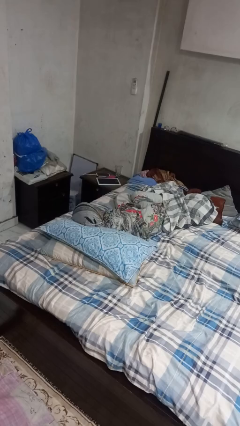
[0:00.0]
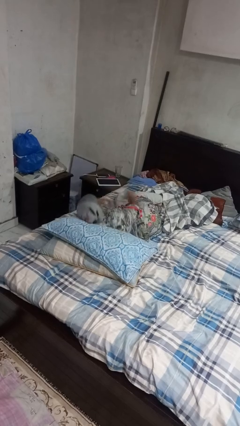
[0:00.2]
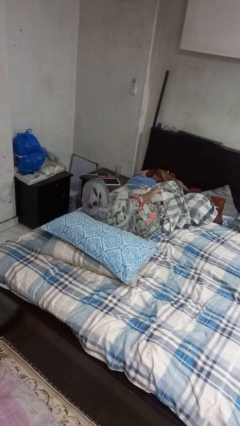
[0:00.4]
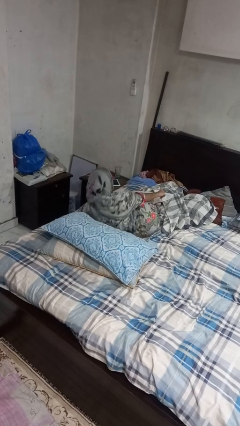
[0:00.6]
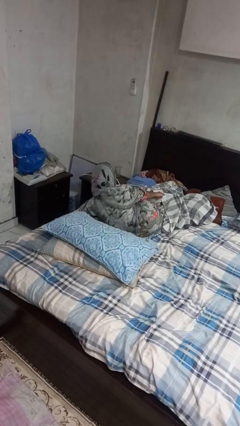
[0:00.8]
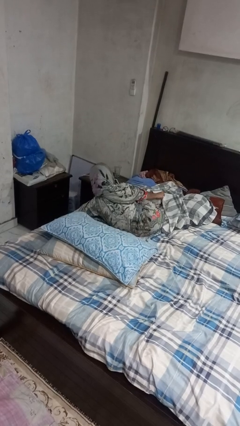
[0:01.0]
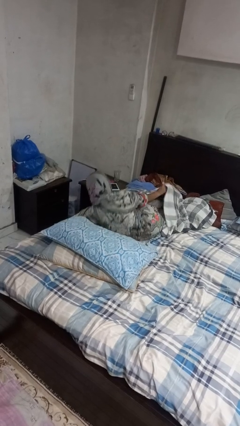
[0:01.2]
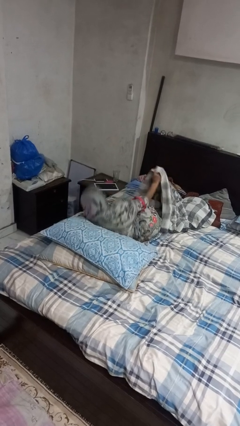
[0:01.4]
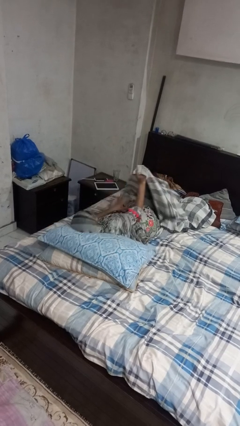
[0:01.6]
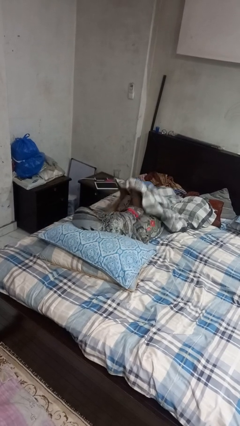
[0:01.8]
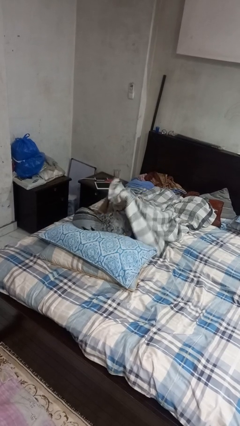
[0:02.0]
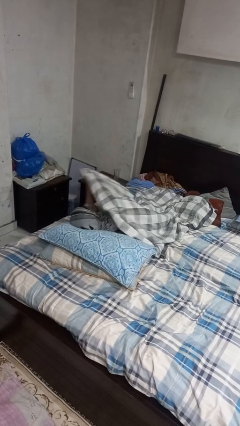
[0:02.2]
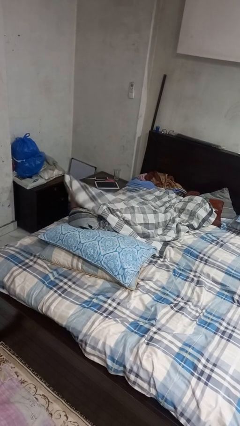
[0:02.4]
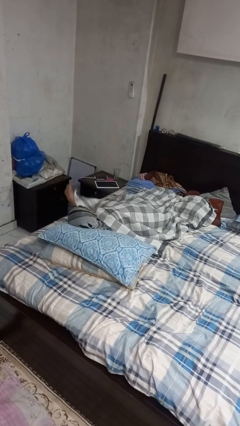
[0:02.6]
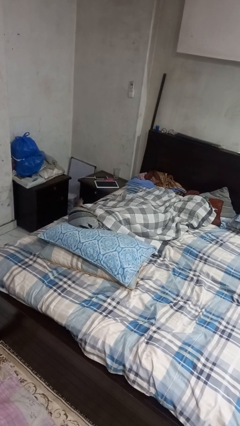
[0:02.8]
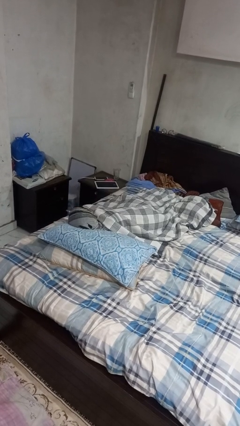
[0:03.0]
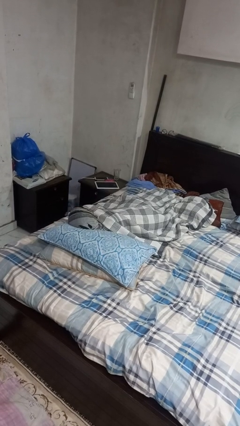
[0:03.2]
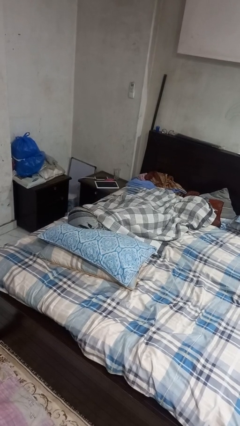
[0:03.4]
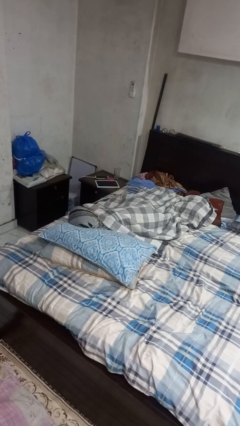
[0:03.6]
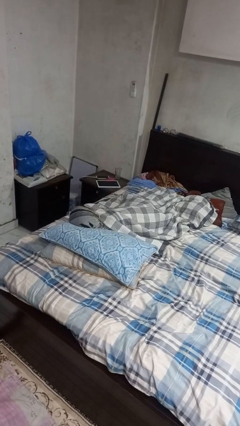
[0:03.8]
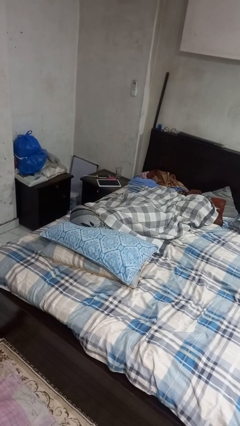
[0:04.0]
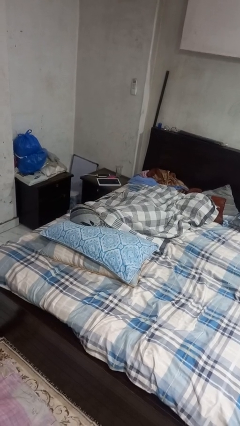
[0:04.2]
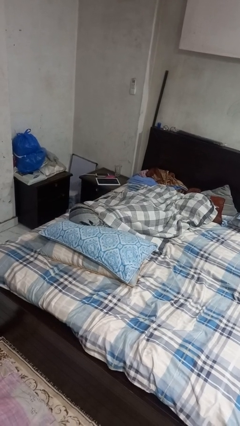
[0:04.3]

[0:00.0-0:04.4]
person covers with bedsheets

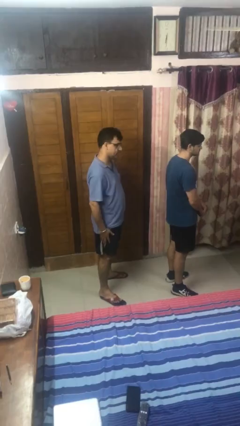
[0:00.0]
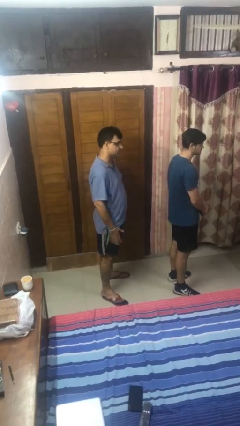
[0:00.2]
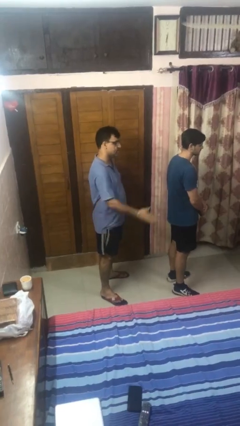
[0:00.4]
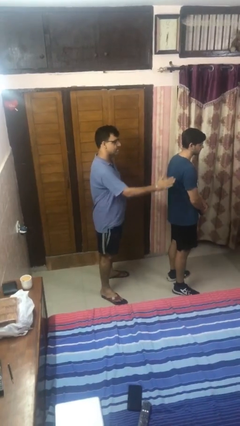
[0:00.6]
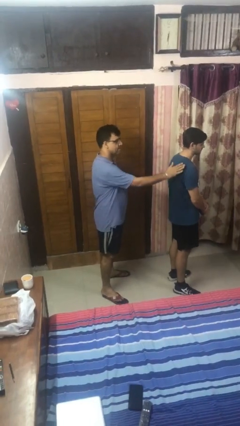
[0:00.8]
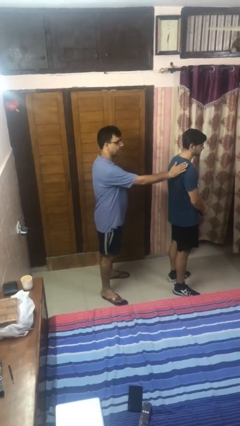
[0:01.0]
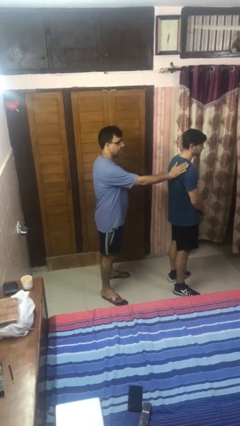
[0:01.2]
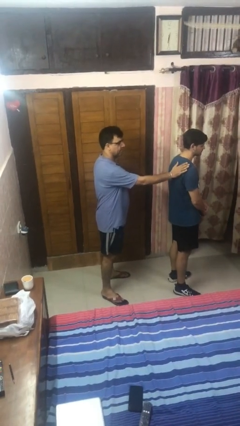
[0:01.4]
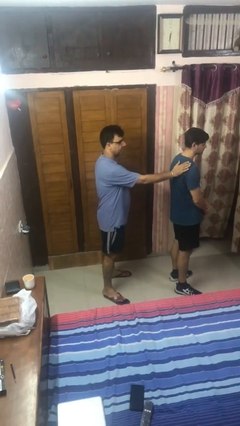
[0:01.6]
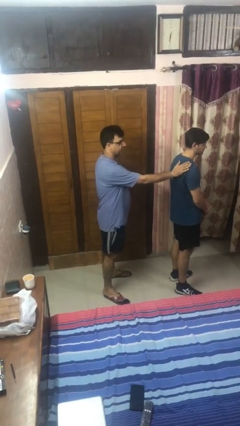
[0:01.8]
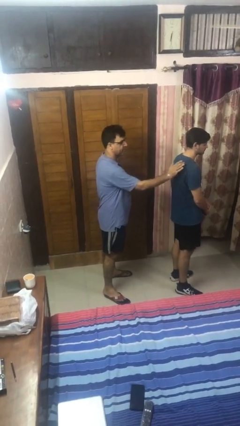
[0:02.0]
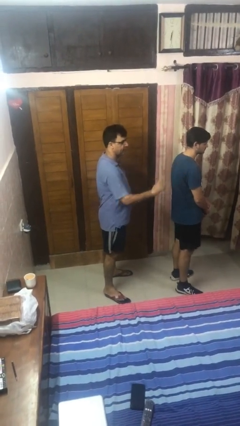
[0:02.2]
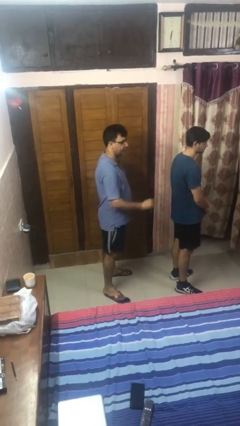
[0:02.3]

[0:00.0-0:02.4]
person touches back of person

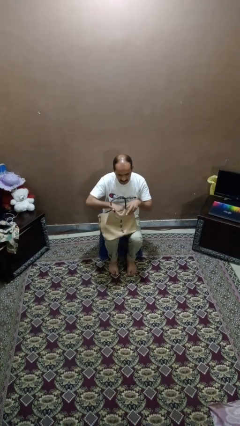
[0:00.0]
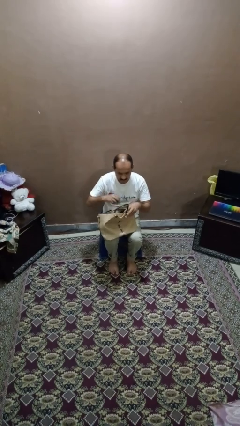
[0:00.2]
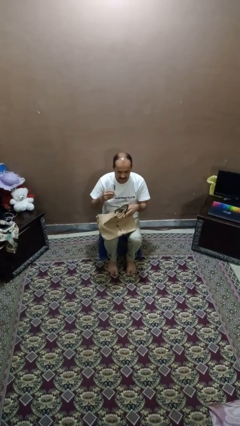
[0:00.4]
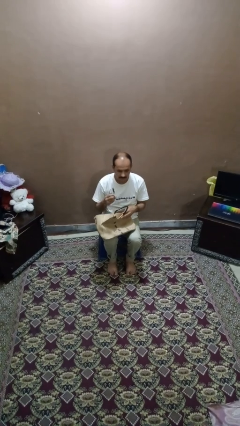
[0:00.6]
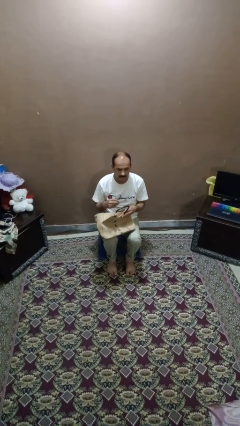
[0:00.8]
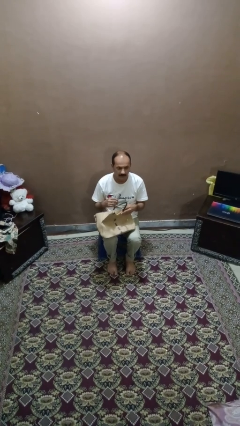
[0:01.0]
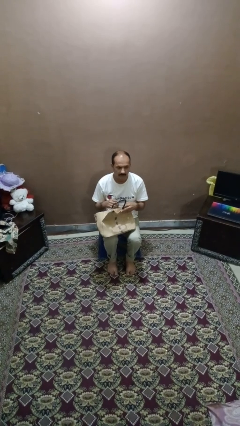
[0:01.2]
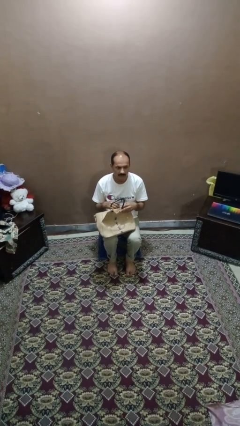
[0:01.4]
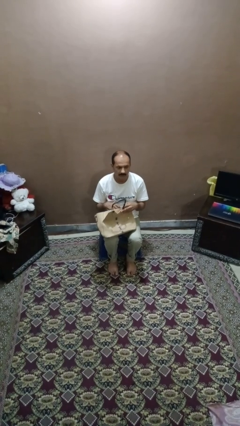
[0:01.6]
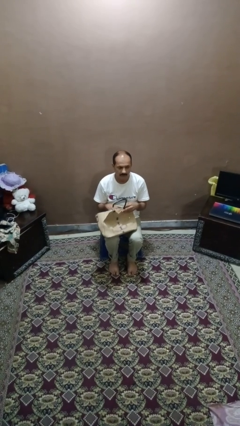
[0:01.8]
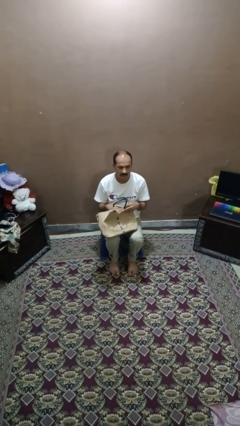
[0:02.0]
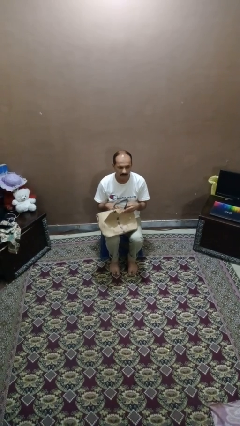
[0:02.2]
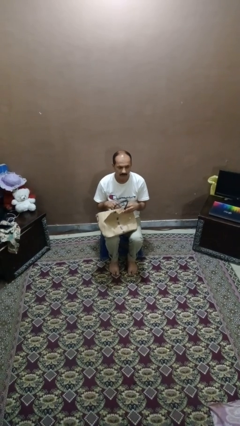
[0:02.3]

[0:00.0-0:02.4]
person takes object from purse

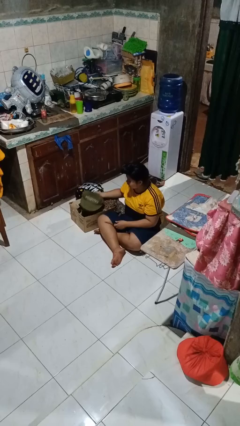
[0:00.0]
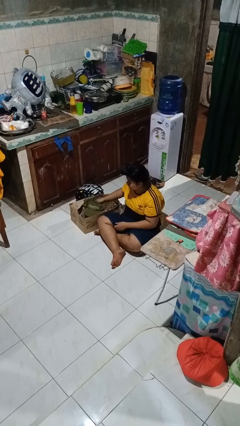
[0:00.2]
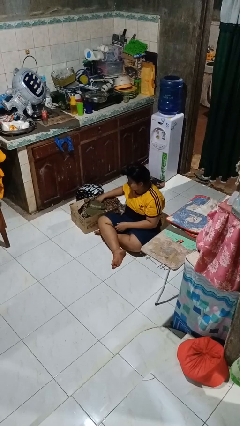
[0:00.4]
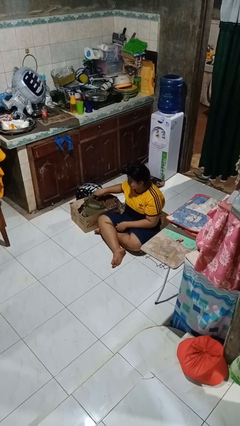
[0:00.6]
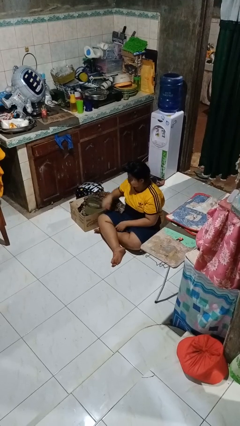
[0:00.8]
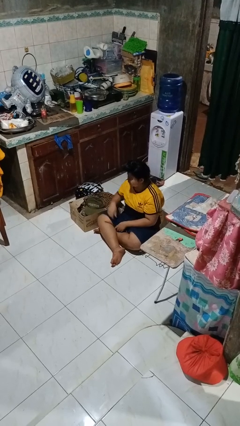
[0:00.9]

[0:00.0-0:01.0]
person puts object into box

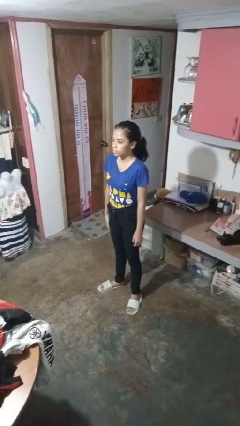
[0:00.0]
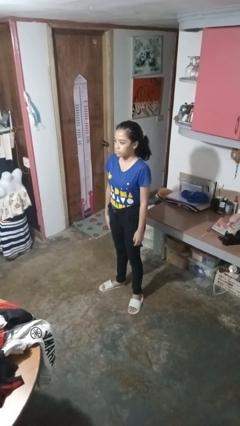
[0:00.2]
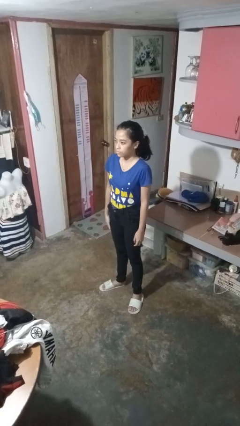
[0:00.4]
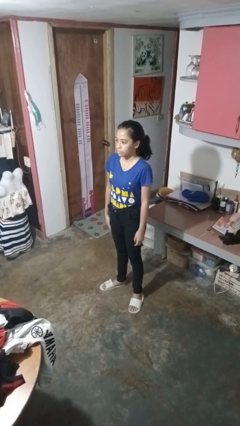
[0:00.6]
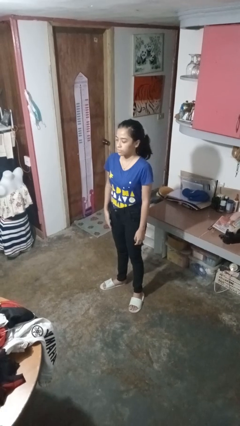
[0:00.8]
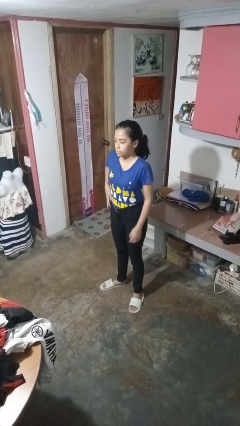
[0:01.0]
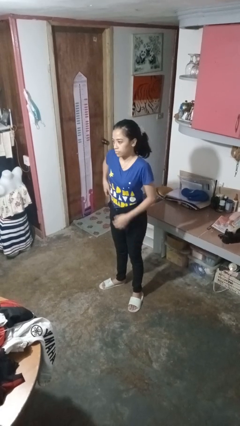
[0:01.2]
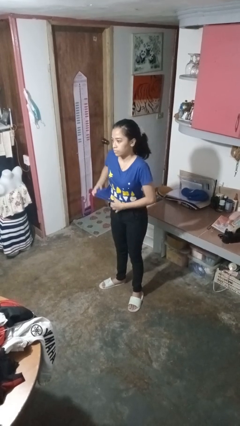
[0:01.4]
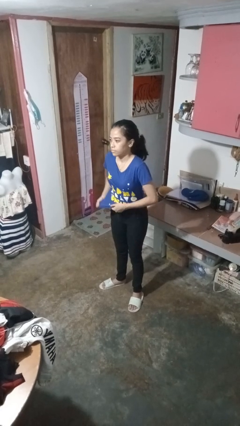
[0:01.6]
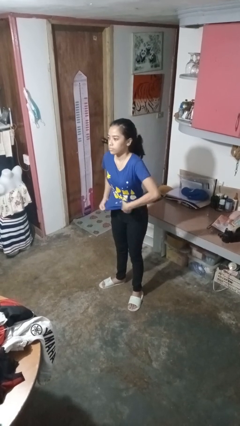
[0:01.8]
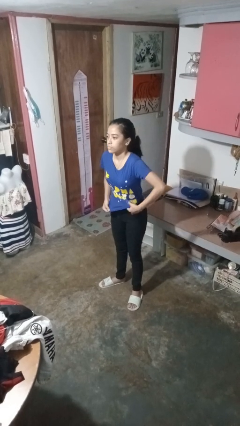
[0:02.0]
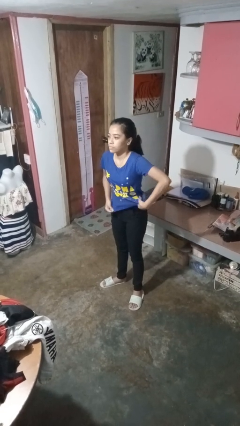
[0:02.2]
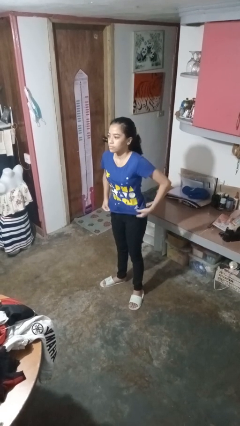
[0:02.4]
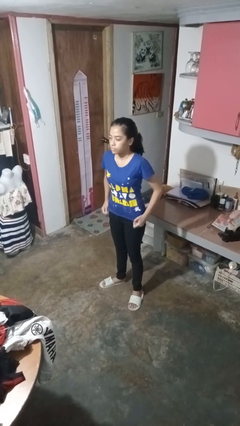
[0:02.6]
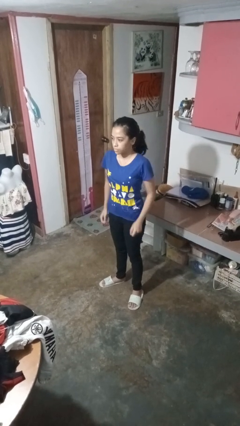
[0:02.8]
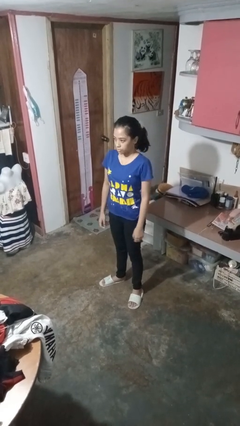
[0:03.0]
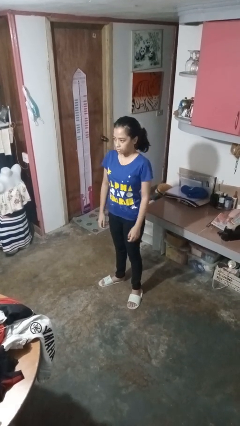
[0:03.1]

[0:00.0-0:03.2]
person untucks shirt

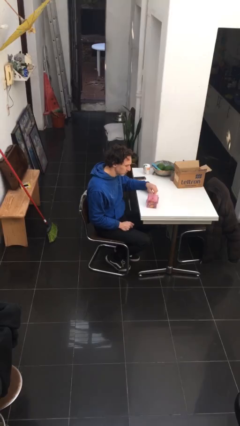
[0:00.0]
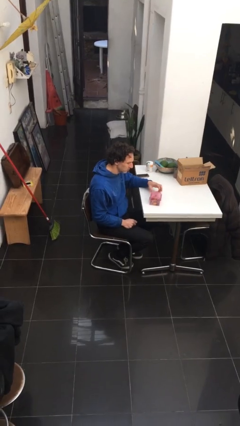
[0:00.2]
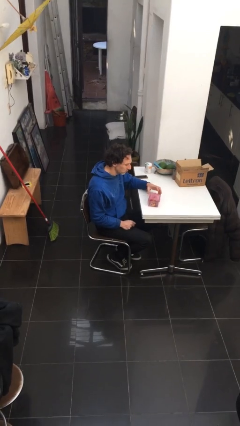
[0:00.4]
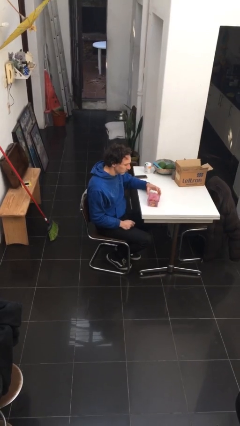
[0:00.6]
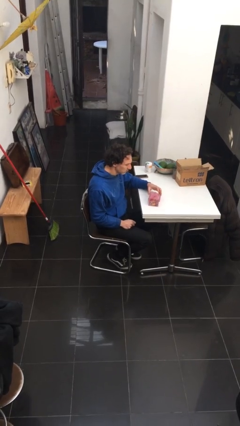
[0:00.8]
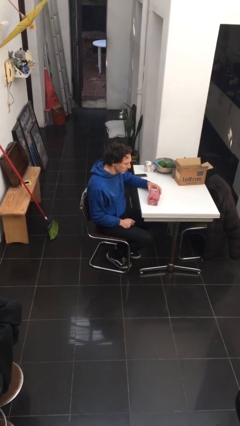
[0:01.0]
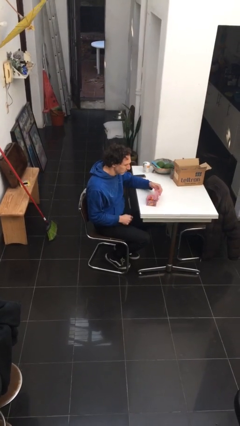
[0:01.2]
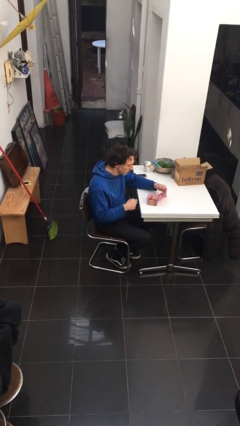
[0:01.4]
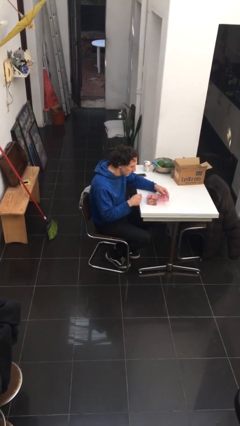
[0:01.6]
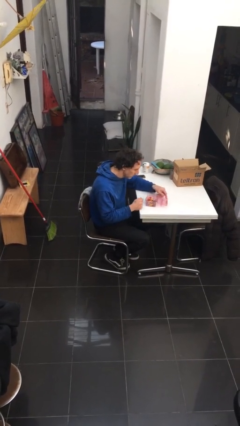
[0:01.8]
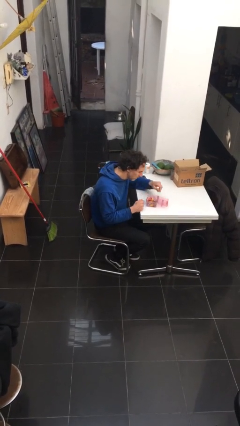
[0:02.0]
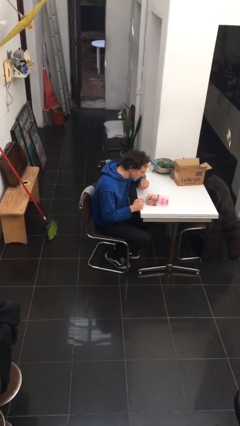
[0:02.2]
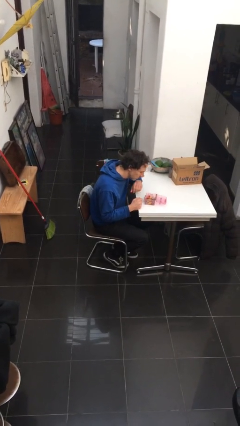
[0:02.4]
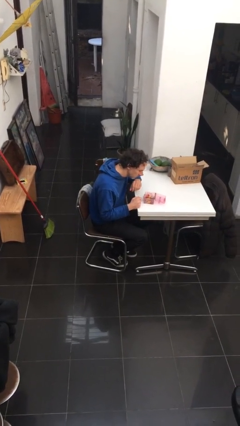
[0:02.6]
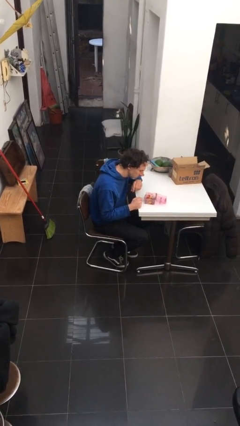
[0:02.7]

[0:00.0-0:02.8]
person opens jewelry box

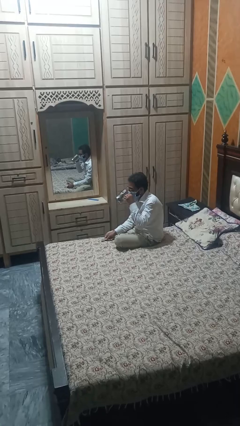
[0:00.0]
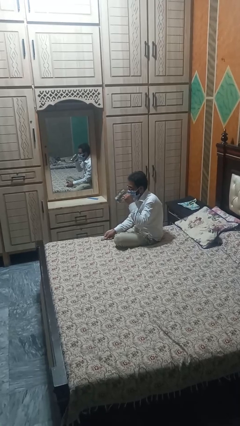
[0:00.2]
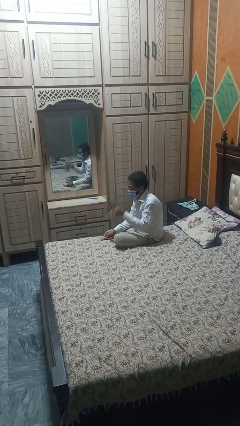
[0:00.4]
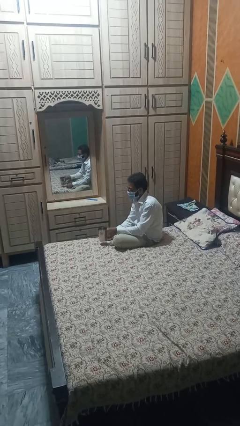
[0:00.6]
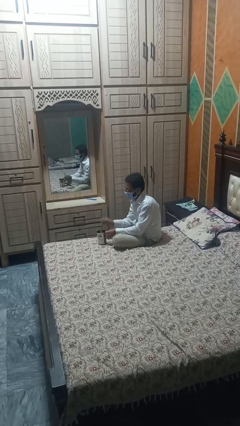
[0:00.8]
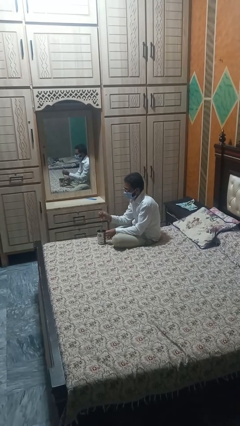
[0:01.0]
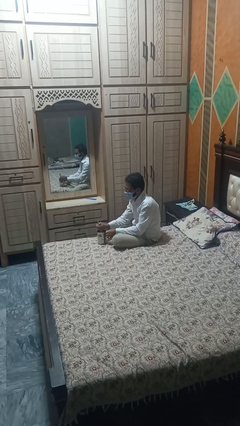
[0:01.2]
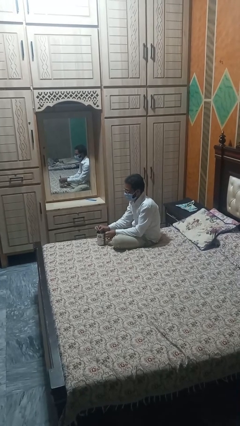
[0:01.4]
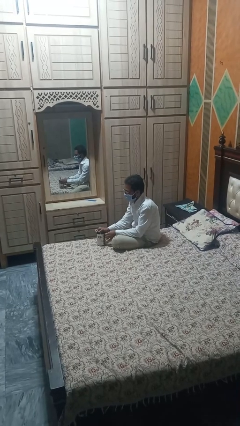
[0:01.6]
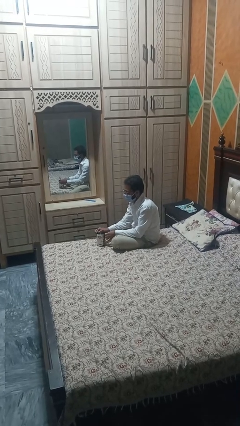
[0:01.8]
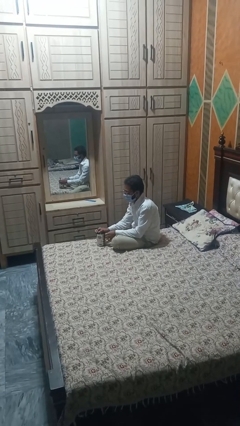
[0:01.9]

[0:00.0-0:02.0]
person stirs mug
